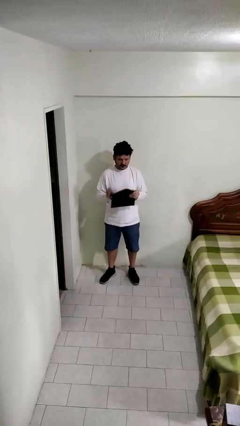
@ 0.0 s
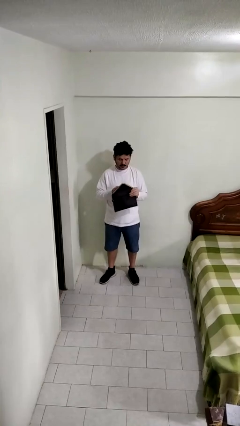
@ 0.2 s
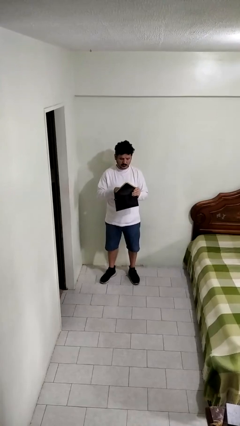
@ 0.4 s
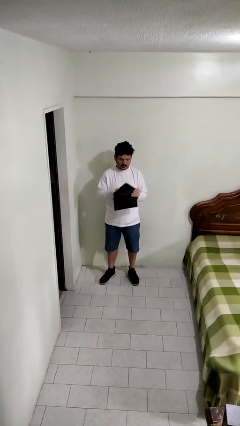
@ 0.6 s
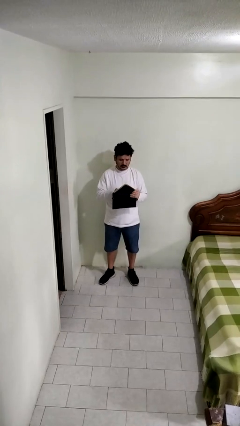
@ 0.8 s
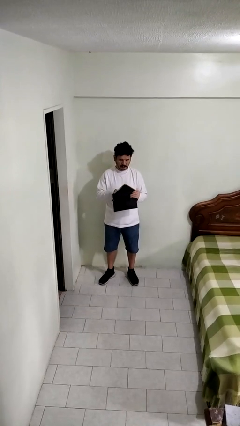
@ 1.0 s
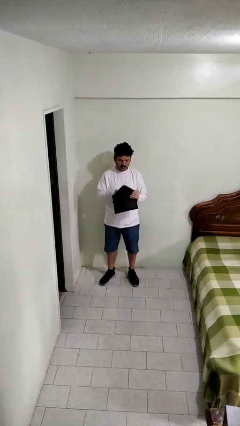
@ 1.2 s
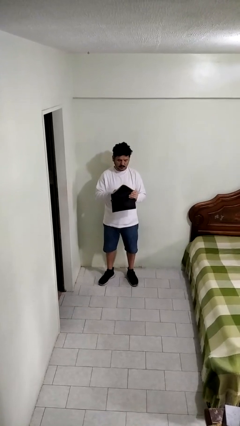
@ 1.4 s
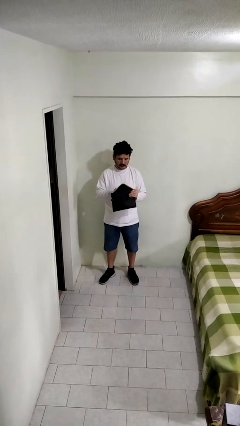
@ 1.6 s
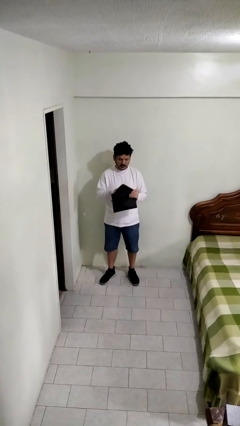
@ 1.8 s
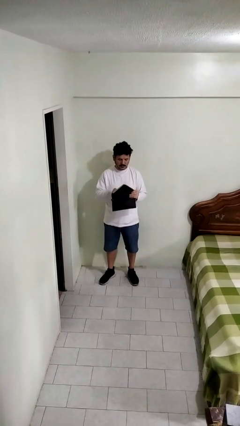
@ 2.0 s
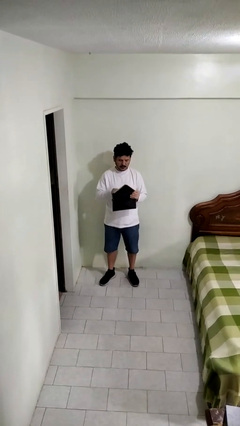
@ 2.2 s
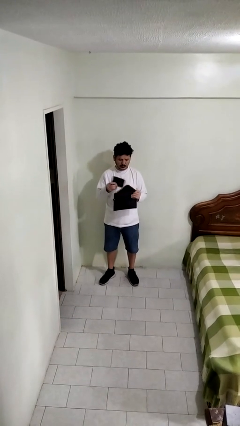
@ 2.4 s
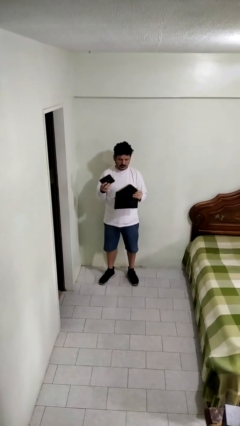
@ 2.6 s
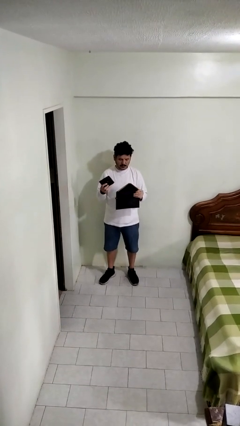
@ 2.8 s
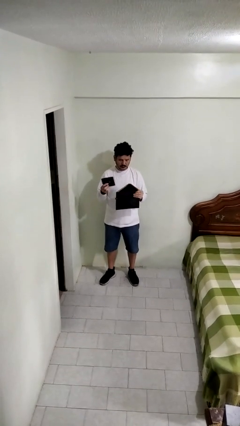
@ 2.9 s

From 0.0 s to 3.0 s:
person searches in purse

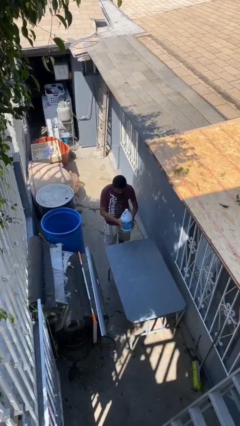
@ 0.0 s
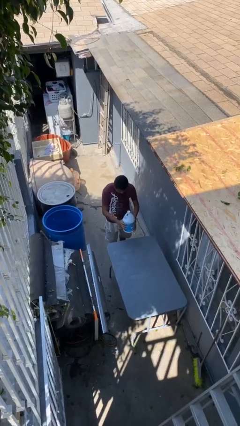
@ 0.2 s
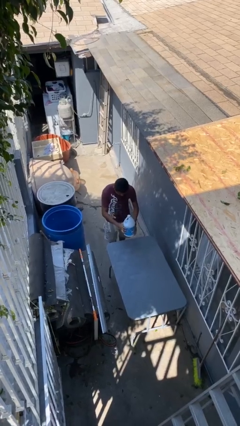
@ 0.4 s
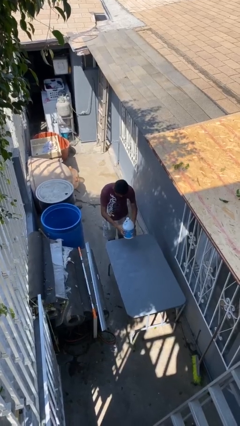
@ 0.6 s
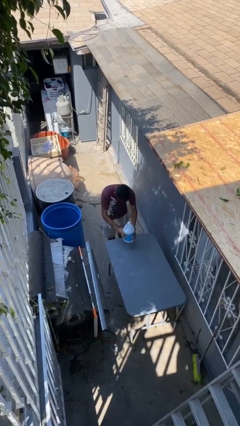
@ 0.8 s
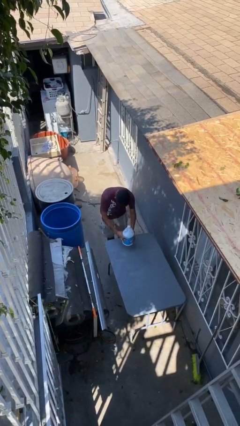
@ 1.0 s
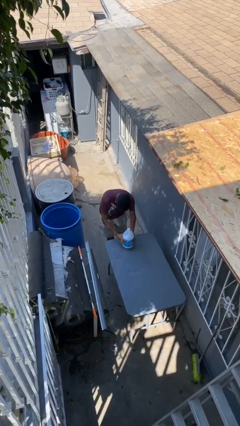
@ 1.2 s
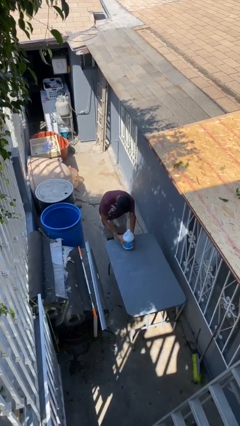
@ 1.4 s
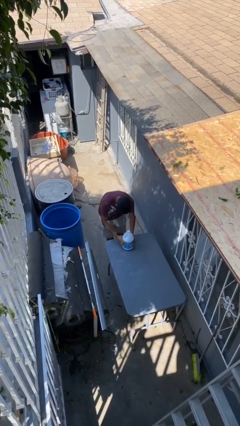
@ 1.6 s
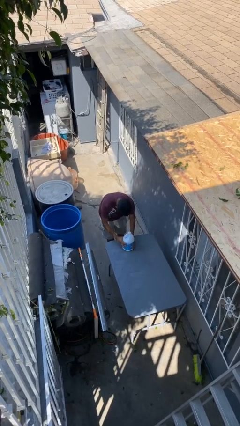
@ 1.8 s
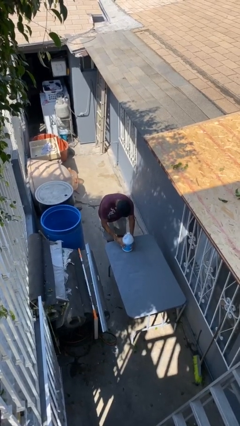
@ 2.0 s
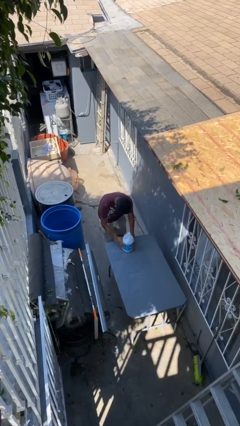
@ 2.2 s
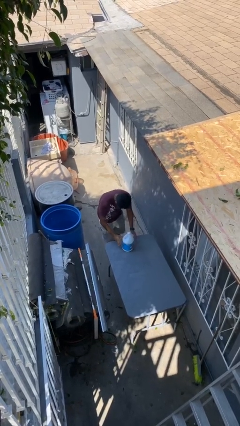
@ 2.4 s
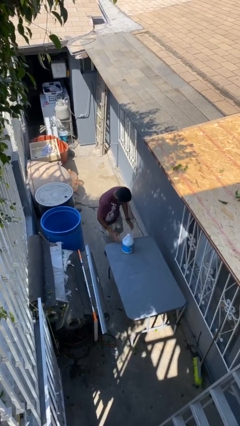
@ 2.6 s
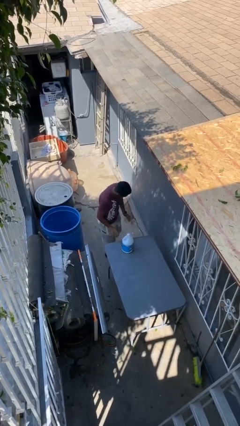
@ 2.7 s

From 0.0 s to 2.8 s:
person puts down object on table

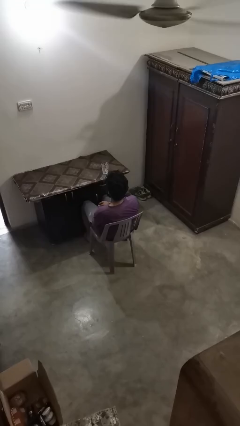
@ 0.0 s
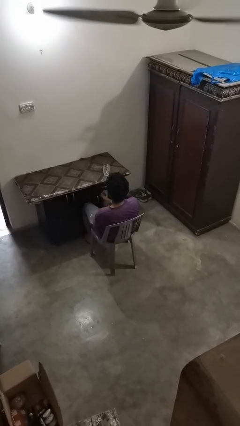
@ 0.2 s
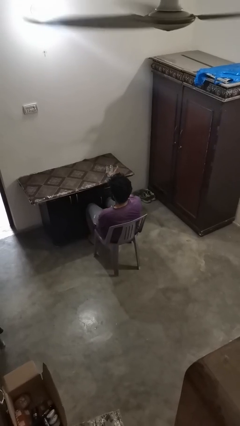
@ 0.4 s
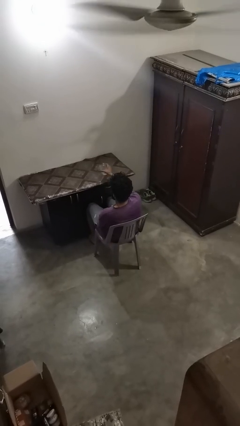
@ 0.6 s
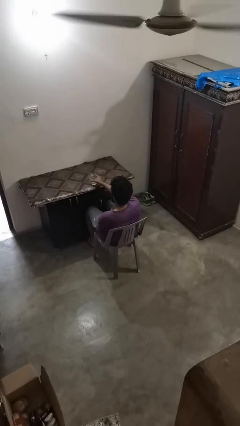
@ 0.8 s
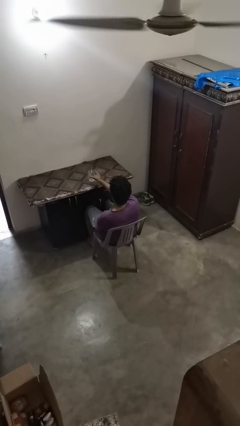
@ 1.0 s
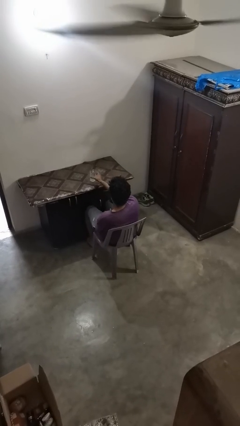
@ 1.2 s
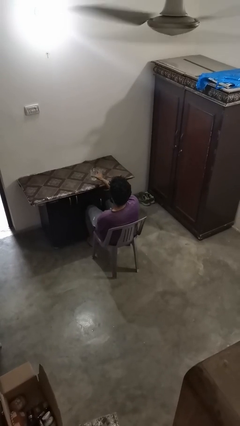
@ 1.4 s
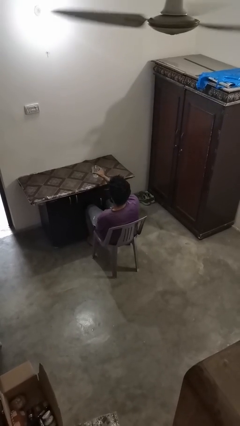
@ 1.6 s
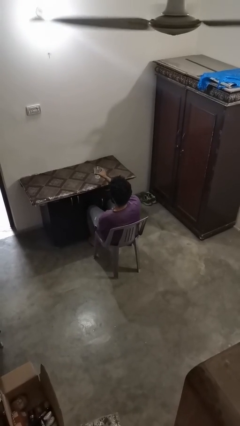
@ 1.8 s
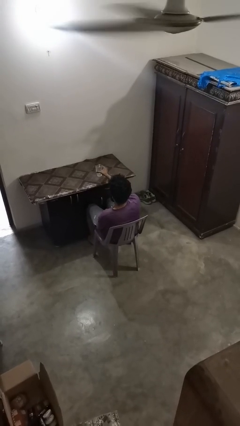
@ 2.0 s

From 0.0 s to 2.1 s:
person knocks over glass

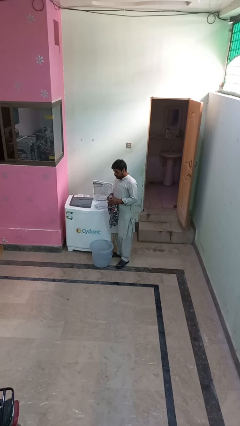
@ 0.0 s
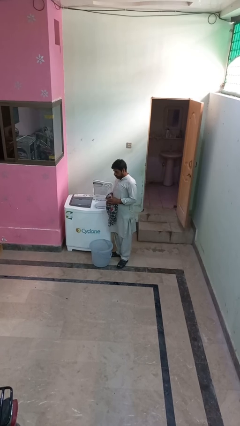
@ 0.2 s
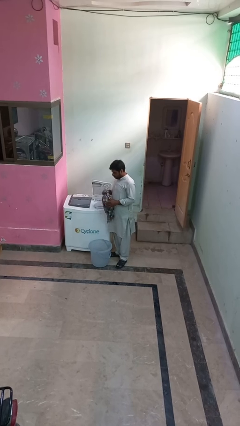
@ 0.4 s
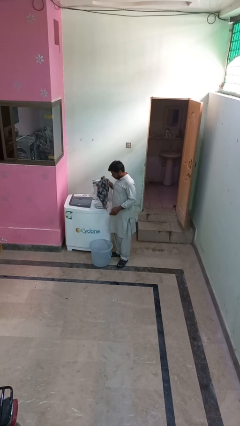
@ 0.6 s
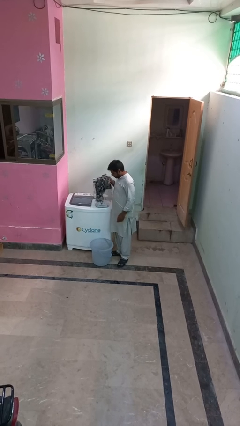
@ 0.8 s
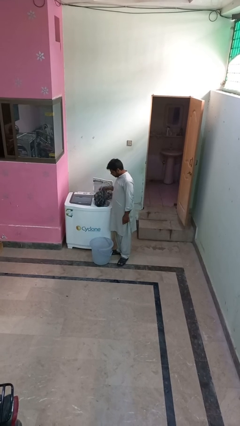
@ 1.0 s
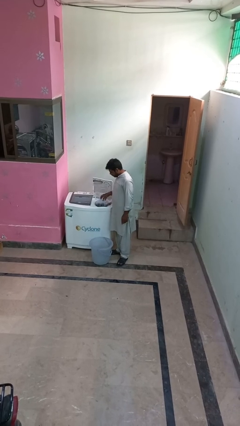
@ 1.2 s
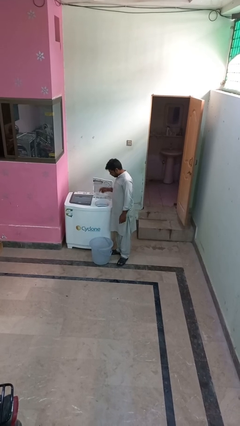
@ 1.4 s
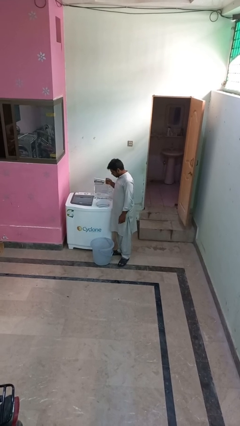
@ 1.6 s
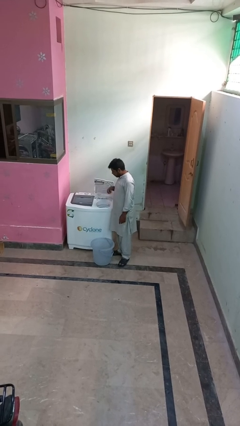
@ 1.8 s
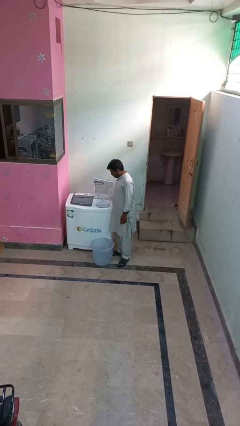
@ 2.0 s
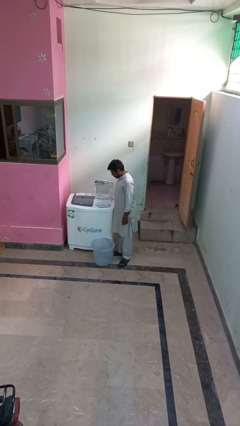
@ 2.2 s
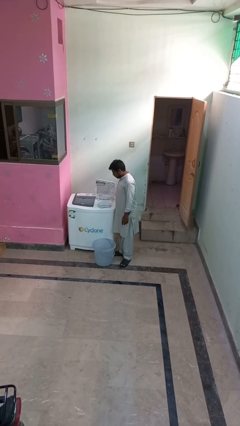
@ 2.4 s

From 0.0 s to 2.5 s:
person loads dryer

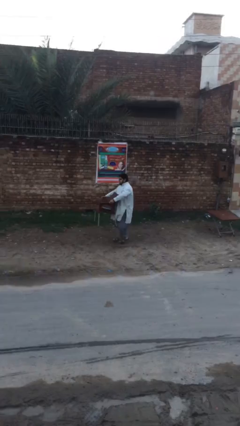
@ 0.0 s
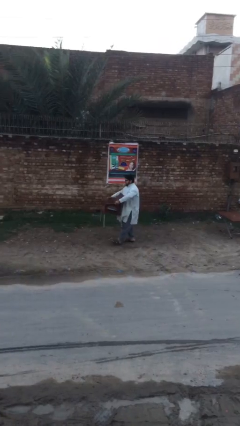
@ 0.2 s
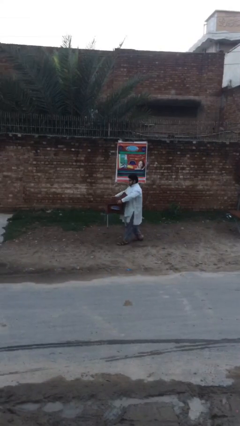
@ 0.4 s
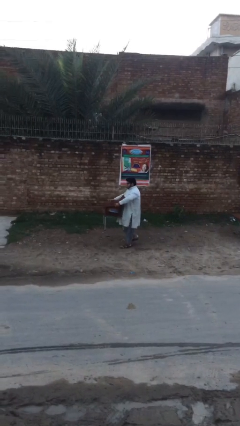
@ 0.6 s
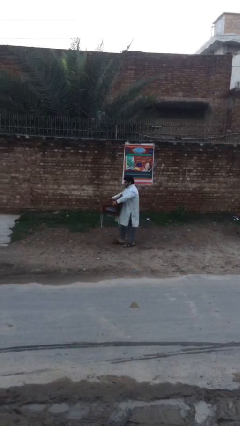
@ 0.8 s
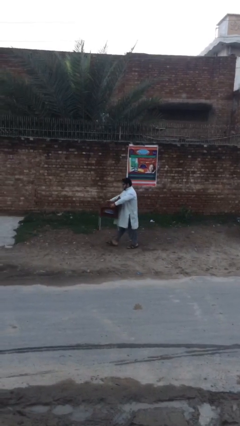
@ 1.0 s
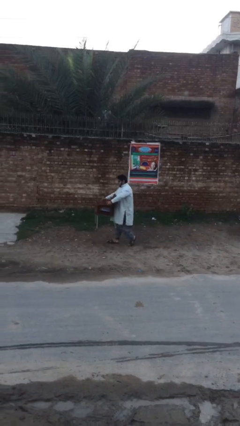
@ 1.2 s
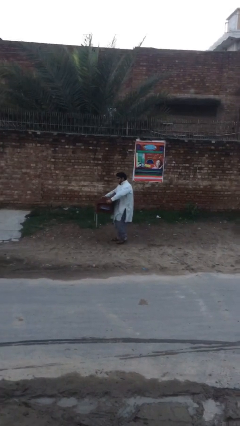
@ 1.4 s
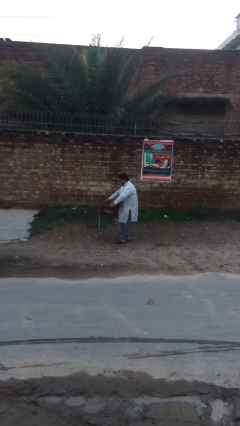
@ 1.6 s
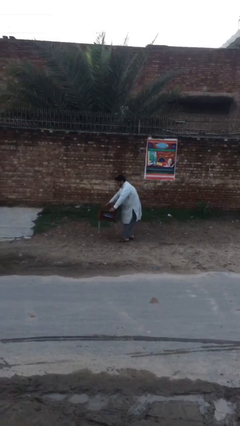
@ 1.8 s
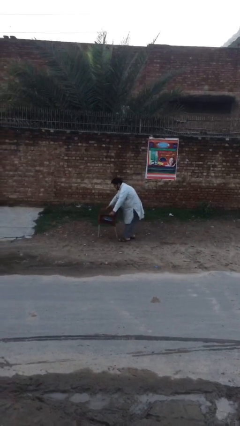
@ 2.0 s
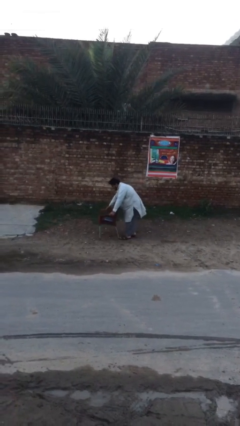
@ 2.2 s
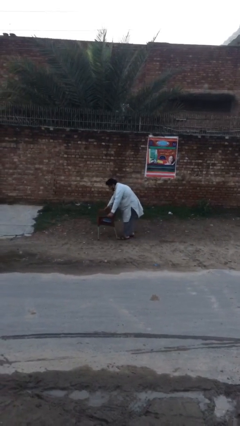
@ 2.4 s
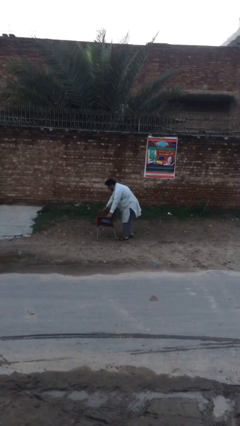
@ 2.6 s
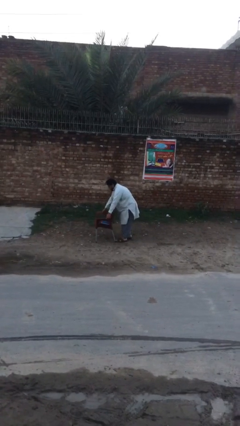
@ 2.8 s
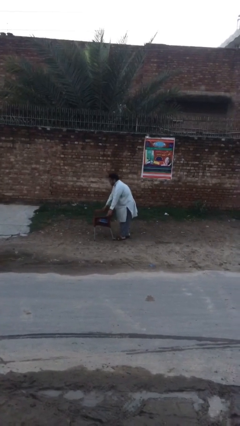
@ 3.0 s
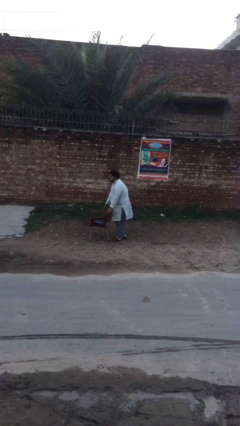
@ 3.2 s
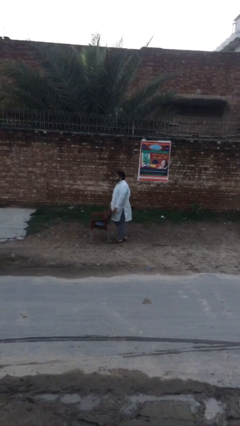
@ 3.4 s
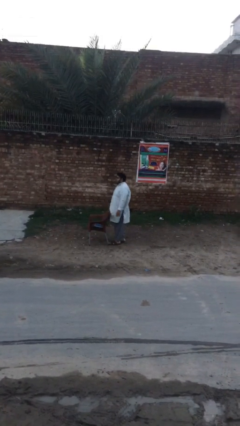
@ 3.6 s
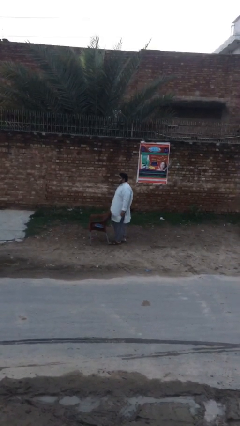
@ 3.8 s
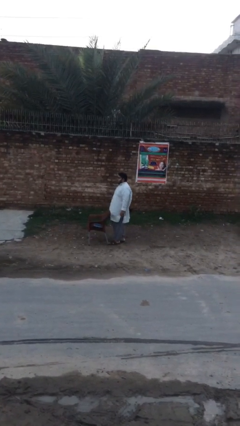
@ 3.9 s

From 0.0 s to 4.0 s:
person puts down object on floor

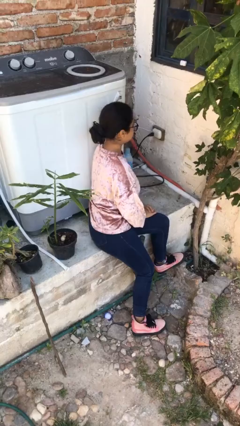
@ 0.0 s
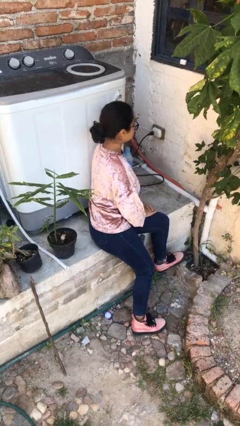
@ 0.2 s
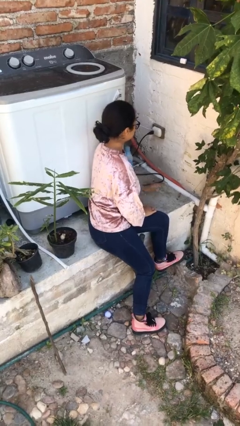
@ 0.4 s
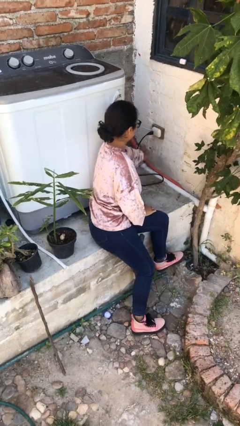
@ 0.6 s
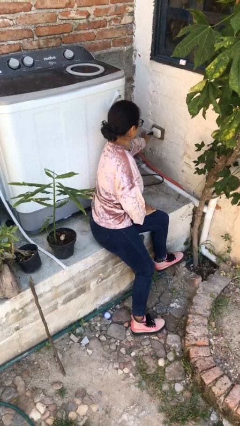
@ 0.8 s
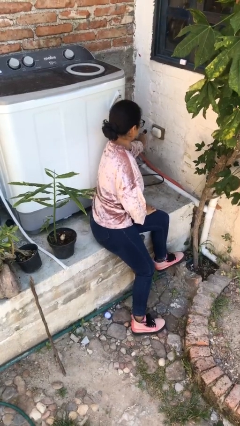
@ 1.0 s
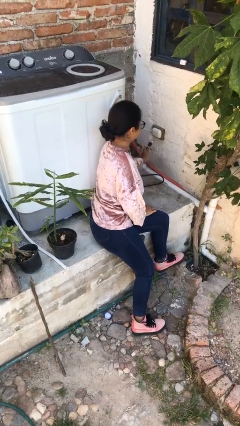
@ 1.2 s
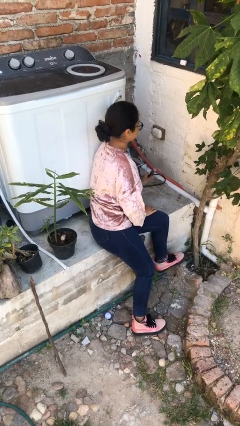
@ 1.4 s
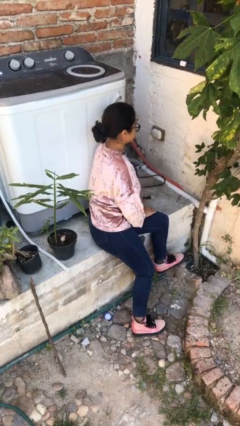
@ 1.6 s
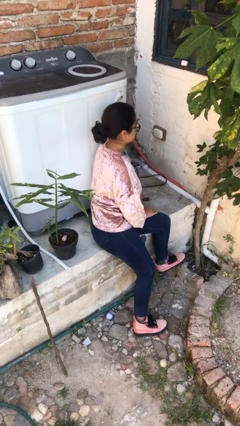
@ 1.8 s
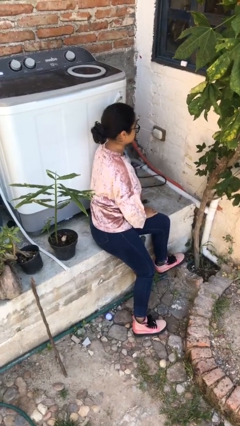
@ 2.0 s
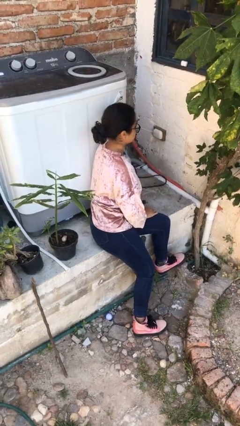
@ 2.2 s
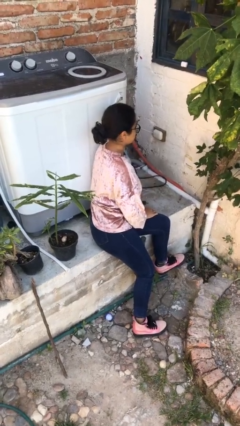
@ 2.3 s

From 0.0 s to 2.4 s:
person unplugs from electrical socket

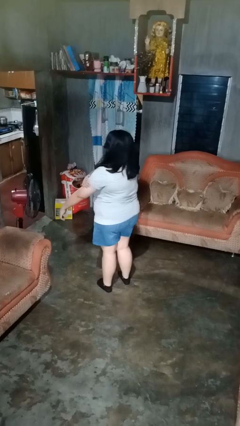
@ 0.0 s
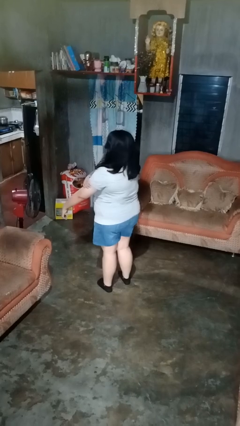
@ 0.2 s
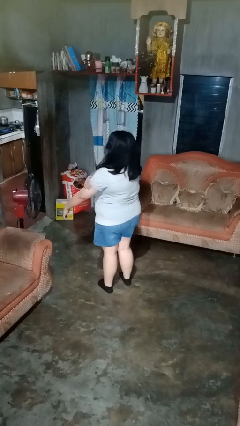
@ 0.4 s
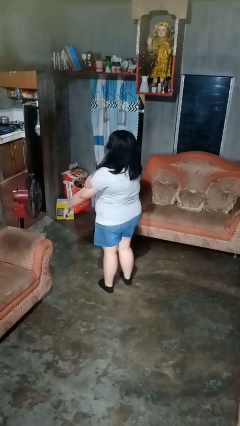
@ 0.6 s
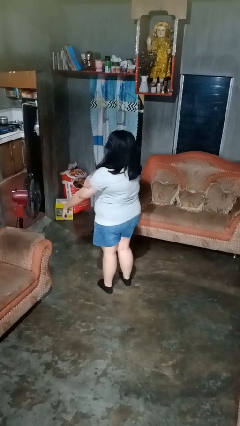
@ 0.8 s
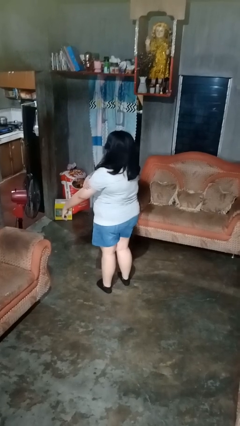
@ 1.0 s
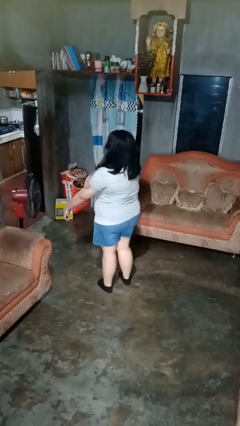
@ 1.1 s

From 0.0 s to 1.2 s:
person swats bug
